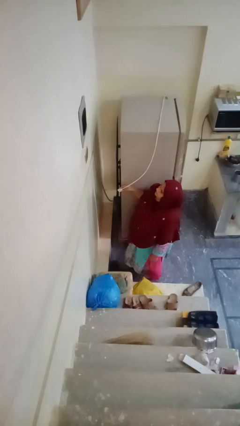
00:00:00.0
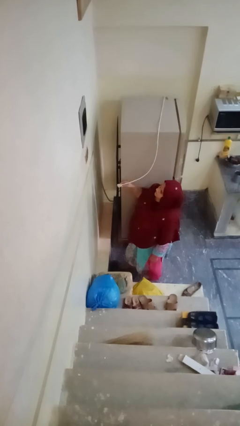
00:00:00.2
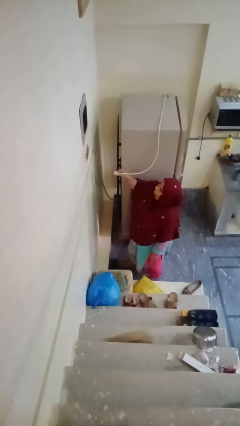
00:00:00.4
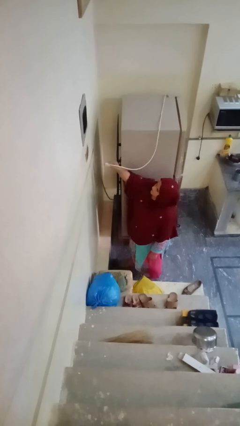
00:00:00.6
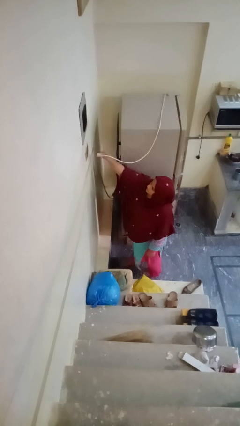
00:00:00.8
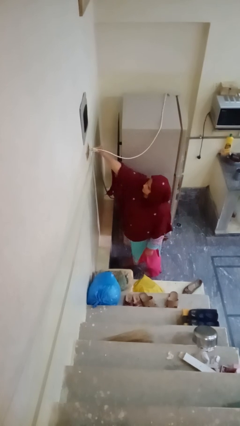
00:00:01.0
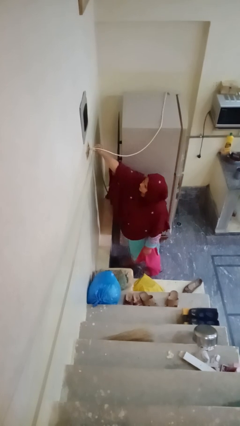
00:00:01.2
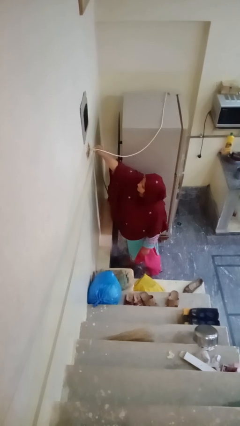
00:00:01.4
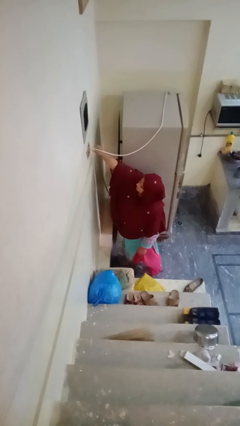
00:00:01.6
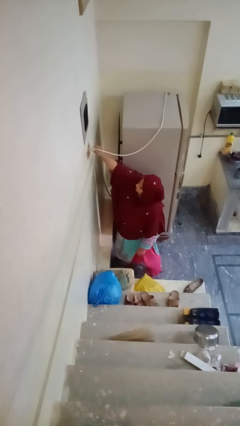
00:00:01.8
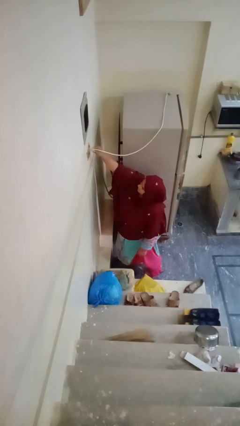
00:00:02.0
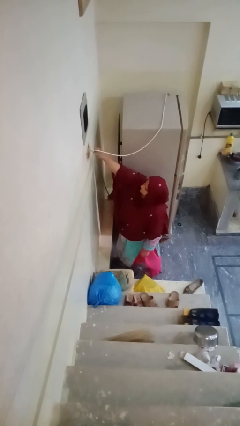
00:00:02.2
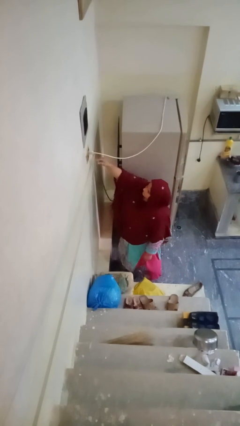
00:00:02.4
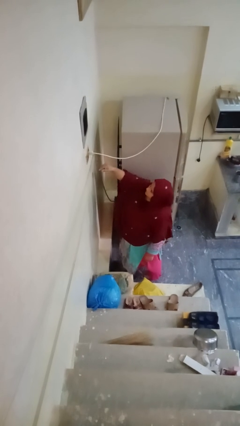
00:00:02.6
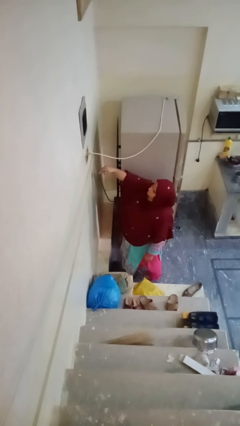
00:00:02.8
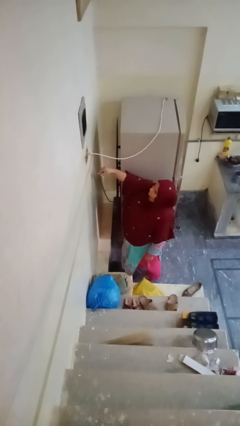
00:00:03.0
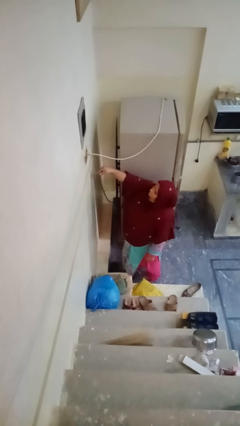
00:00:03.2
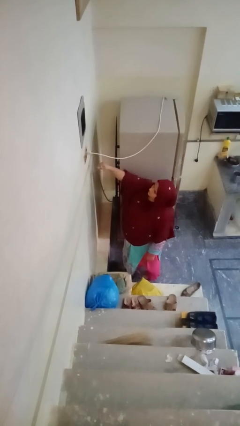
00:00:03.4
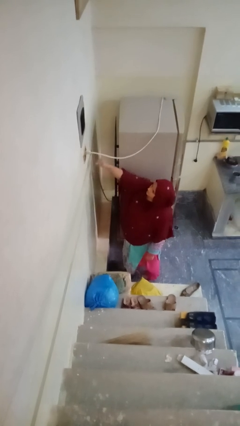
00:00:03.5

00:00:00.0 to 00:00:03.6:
person plugs into electrical socket

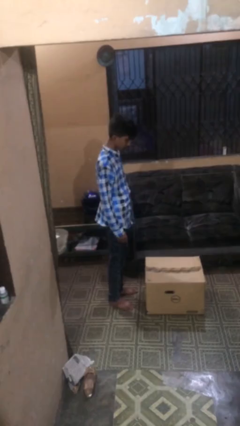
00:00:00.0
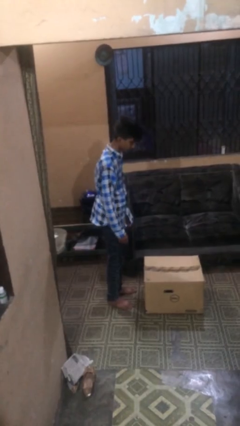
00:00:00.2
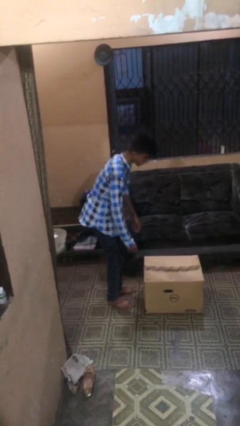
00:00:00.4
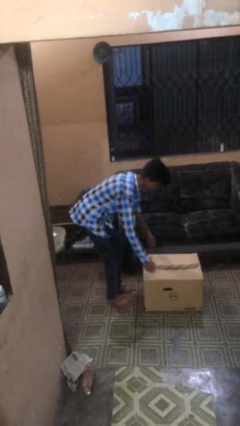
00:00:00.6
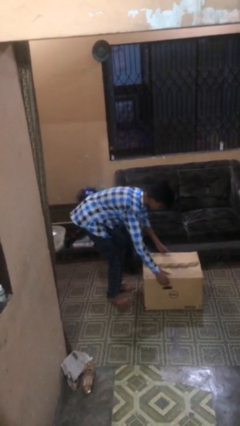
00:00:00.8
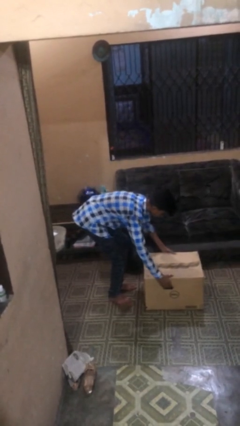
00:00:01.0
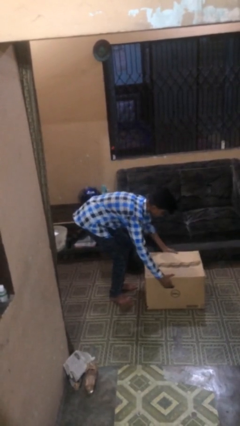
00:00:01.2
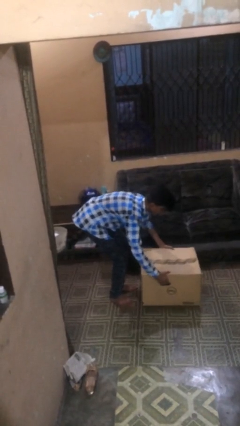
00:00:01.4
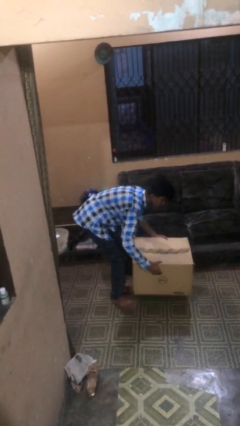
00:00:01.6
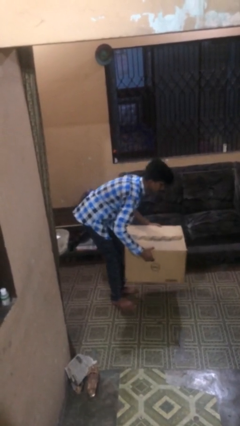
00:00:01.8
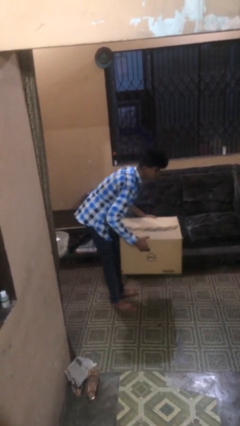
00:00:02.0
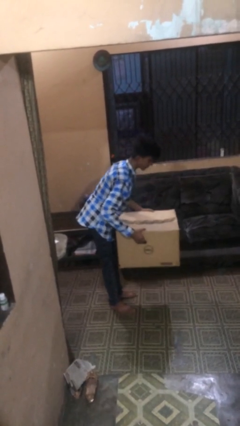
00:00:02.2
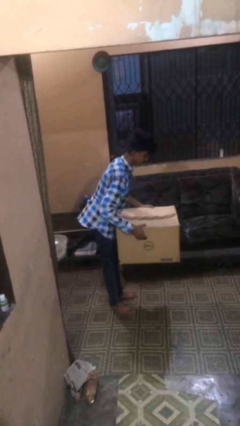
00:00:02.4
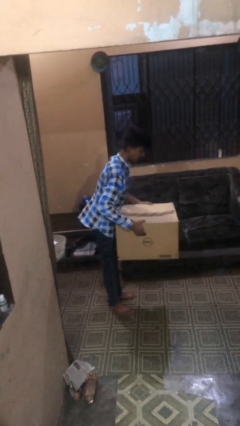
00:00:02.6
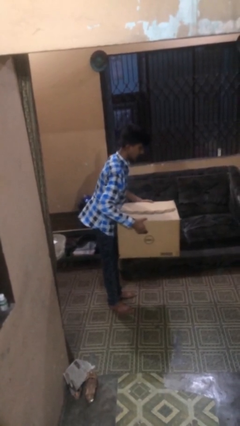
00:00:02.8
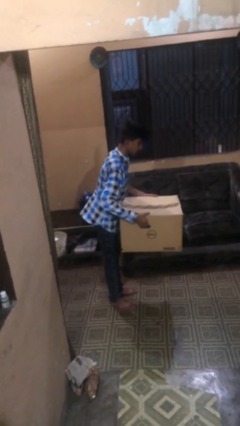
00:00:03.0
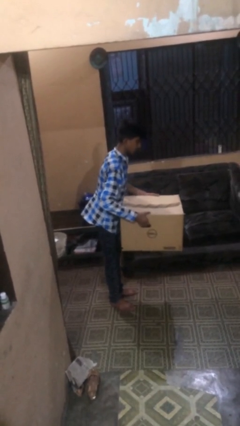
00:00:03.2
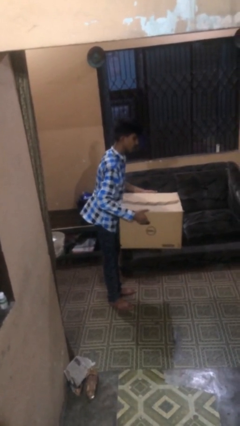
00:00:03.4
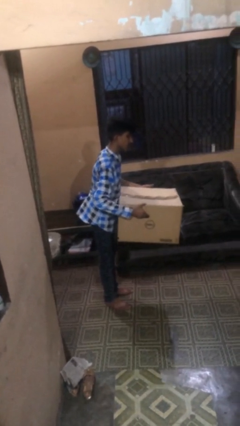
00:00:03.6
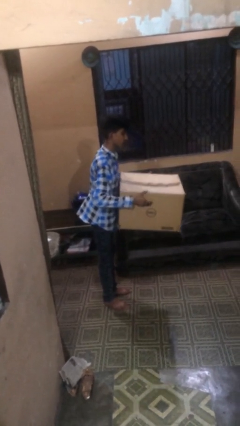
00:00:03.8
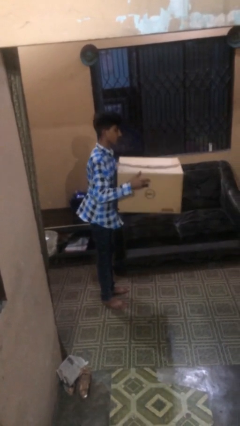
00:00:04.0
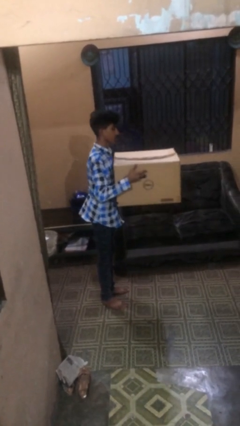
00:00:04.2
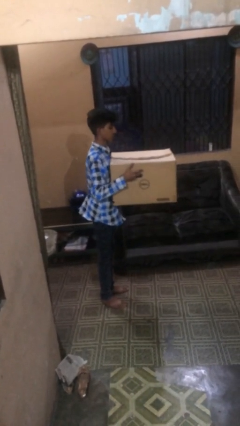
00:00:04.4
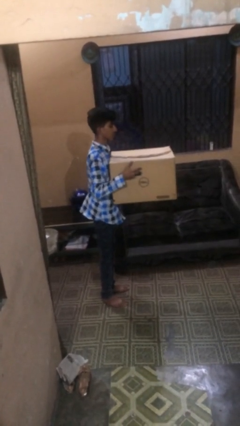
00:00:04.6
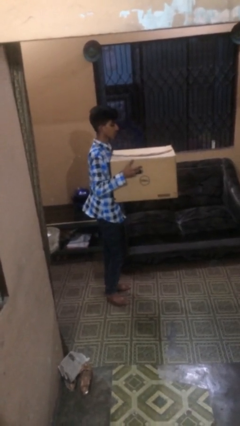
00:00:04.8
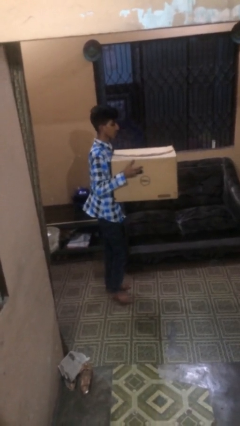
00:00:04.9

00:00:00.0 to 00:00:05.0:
person picks up object from floor

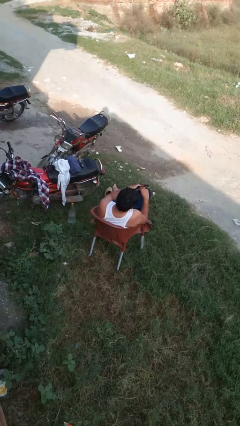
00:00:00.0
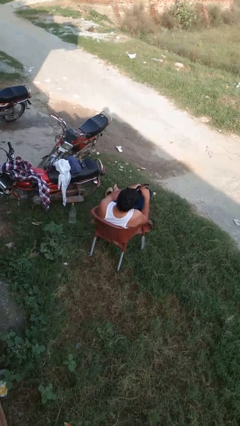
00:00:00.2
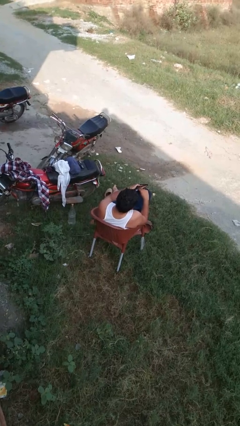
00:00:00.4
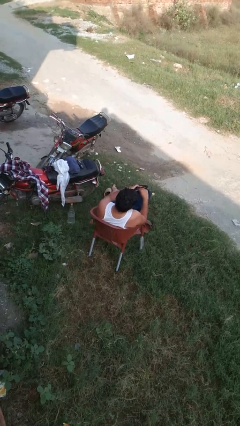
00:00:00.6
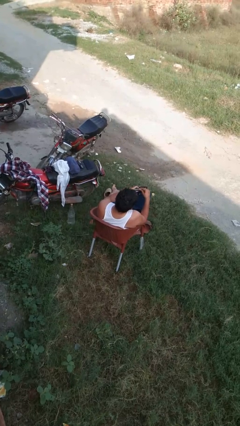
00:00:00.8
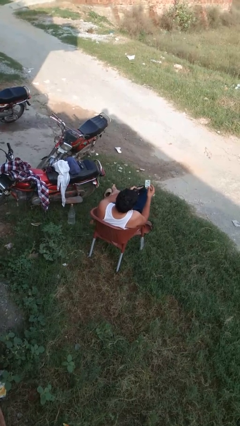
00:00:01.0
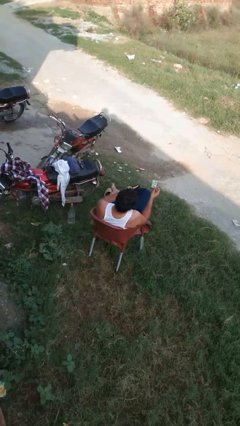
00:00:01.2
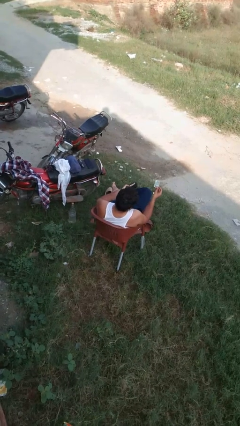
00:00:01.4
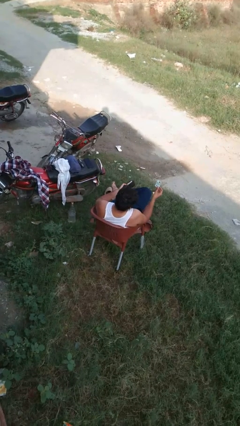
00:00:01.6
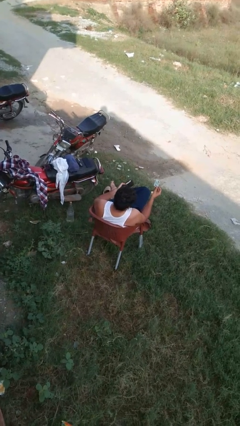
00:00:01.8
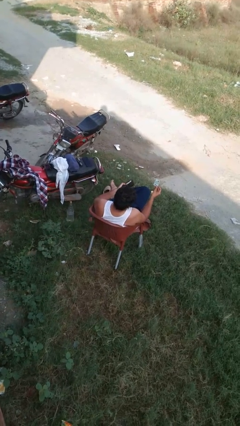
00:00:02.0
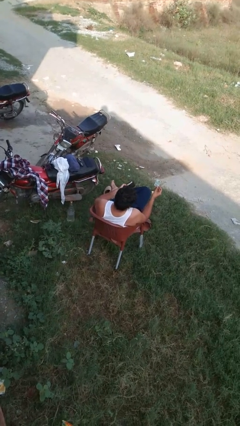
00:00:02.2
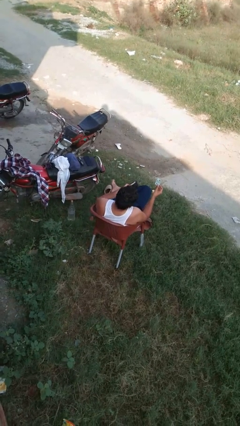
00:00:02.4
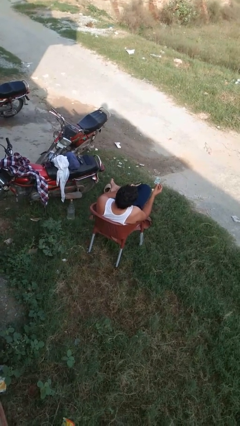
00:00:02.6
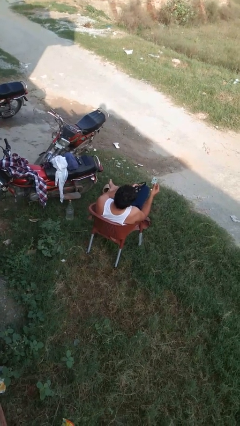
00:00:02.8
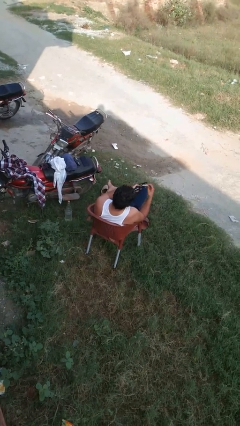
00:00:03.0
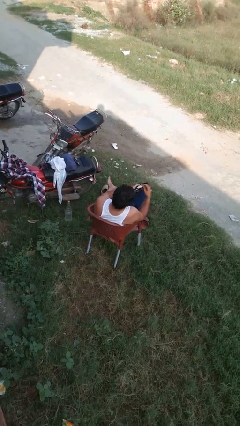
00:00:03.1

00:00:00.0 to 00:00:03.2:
person takes object from purse

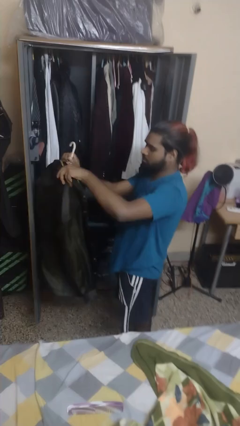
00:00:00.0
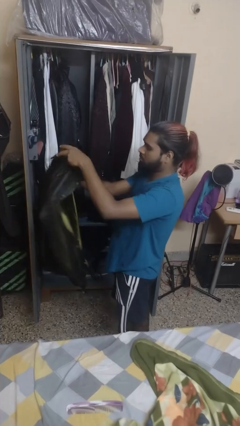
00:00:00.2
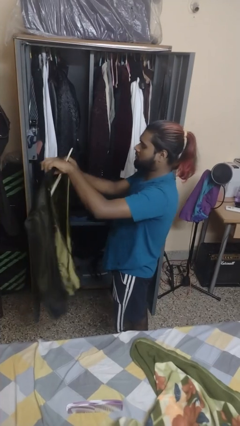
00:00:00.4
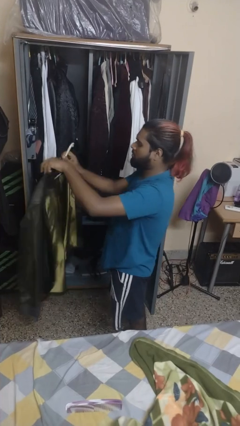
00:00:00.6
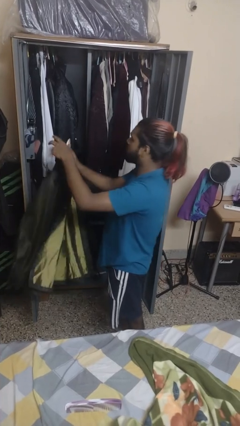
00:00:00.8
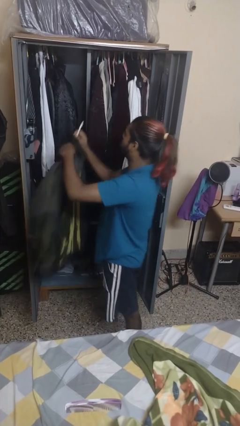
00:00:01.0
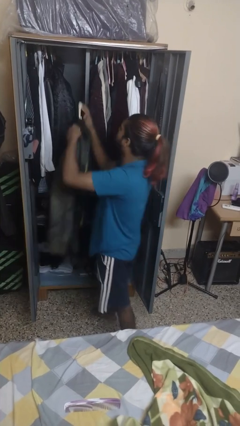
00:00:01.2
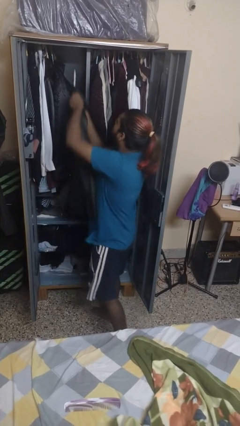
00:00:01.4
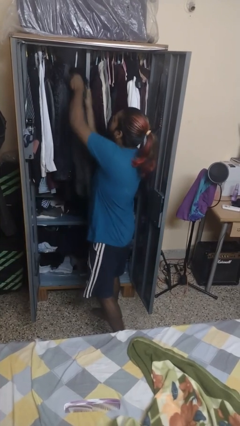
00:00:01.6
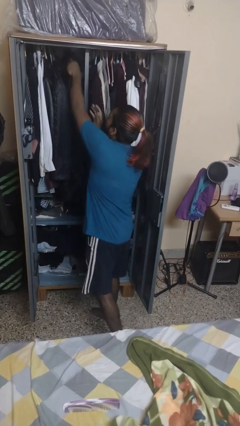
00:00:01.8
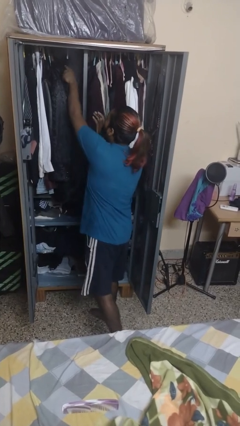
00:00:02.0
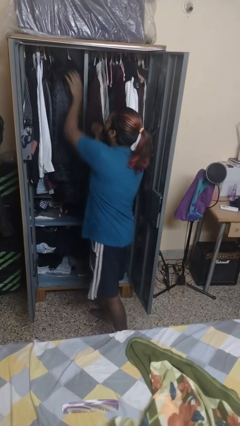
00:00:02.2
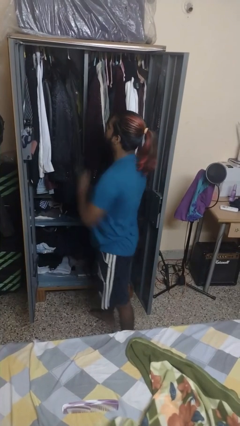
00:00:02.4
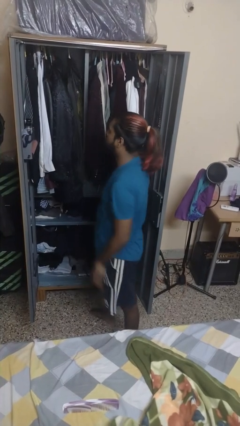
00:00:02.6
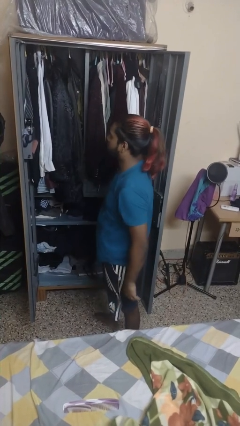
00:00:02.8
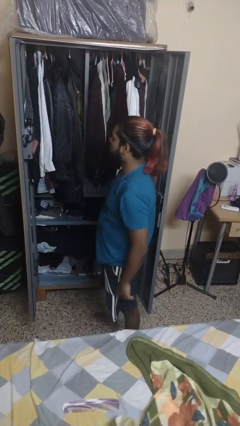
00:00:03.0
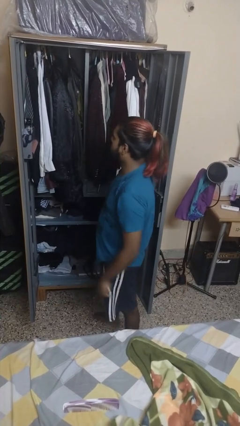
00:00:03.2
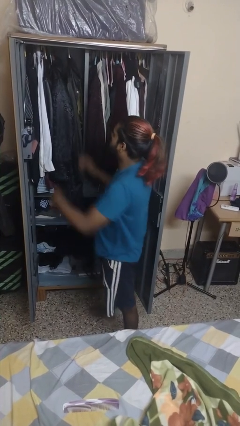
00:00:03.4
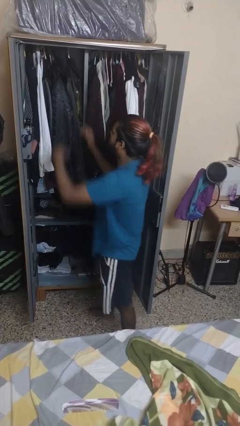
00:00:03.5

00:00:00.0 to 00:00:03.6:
person puts clothes into dresser

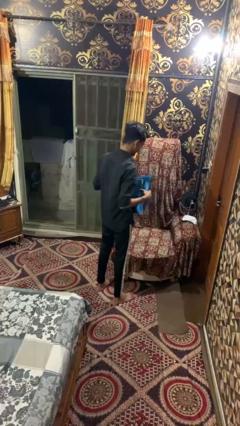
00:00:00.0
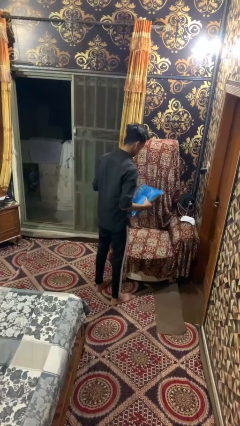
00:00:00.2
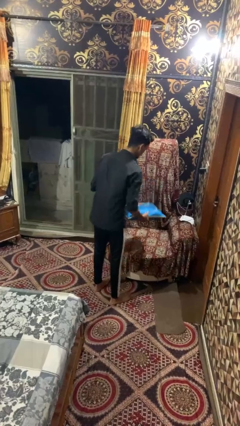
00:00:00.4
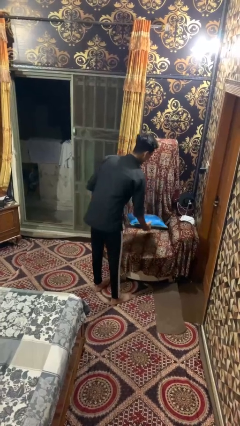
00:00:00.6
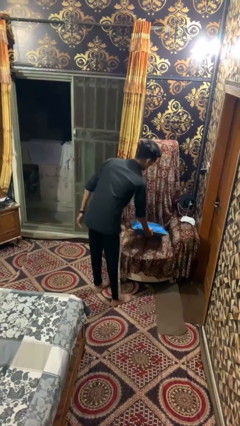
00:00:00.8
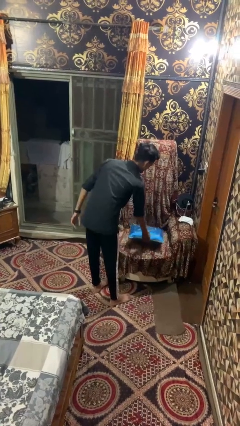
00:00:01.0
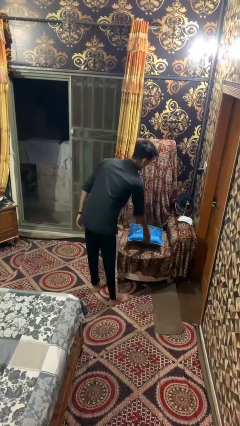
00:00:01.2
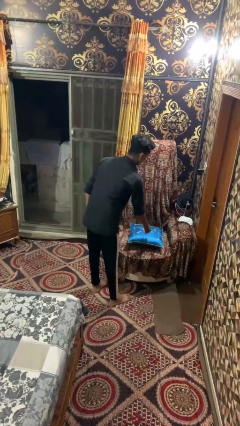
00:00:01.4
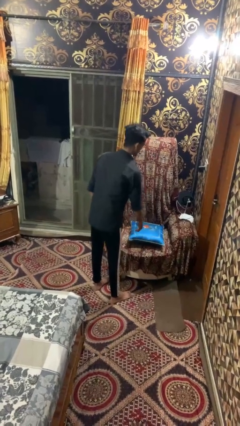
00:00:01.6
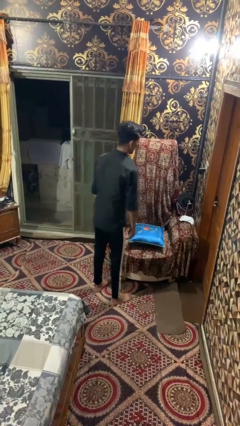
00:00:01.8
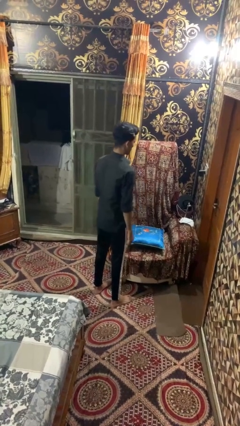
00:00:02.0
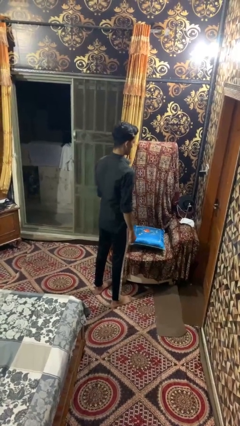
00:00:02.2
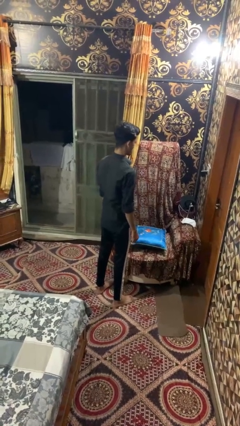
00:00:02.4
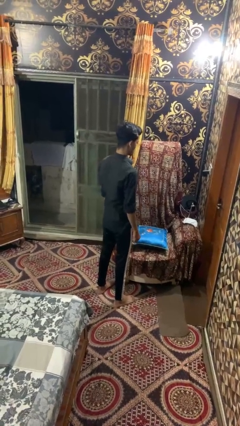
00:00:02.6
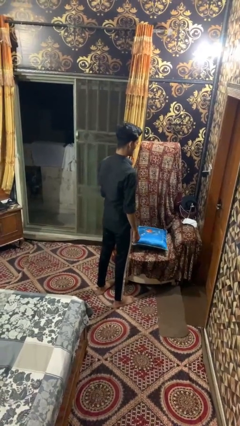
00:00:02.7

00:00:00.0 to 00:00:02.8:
person puts down object on couch
